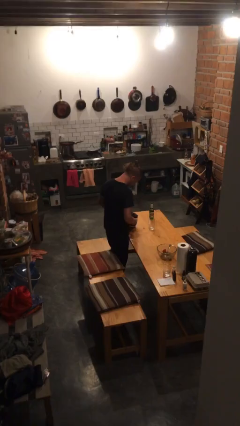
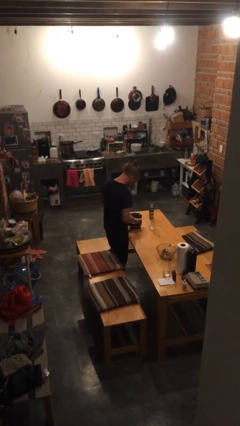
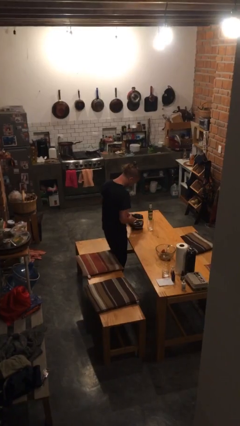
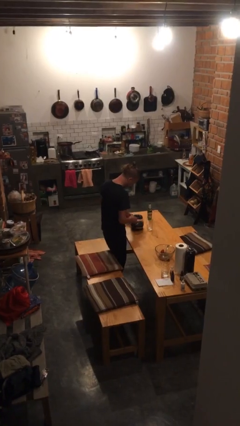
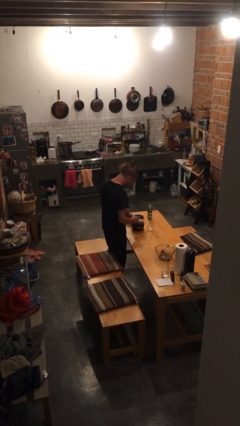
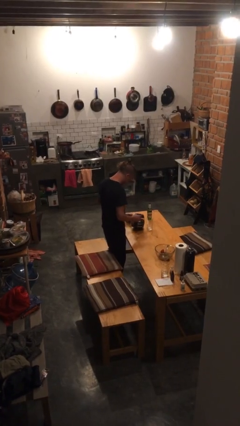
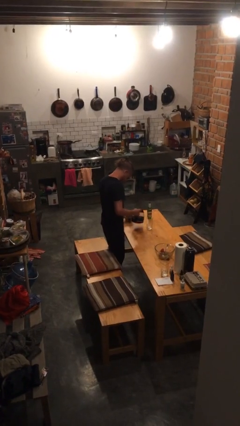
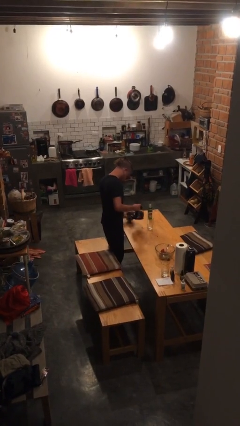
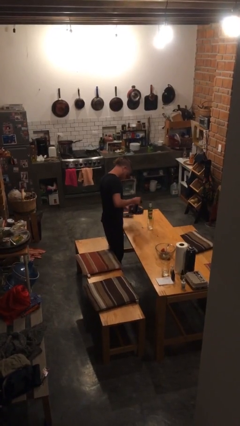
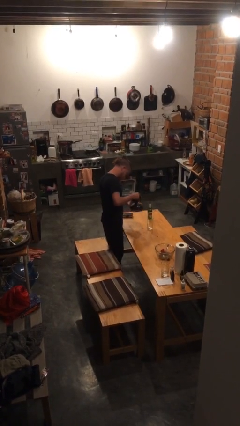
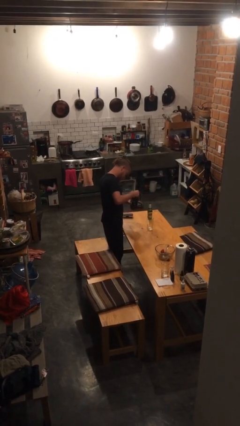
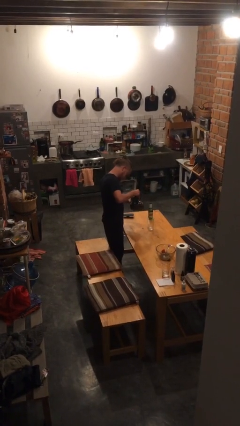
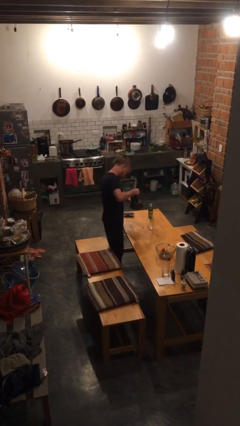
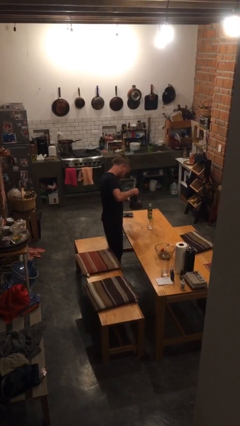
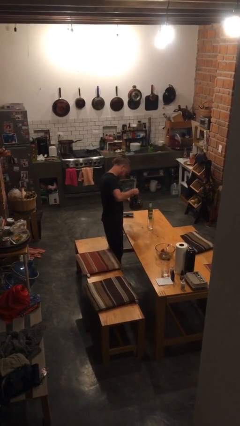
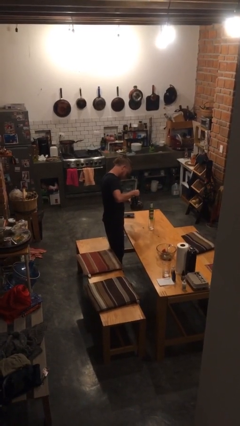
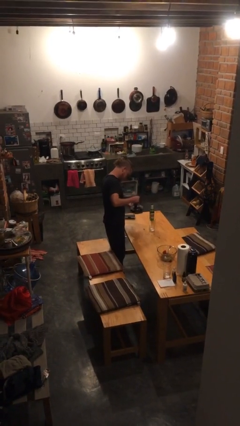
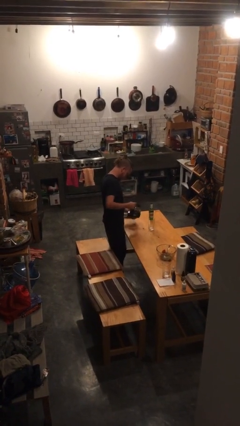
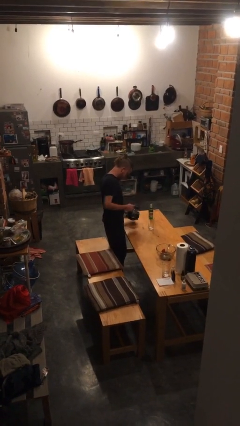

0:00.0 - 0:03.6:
person pours coffee into mug

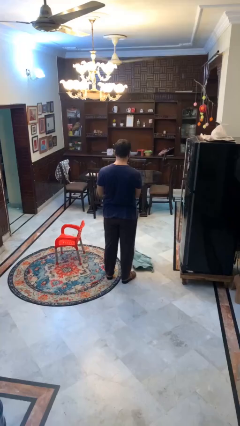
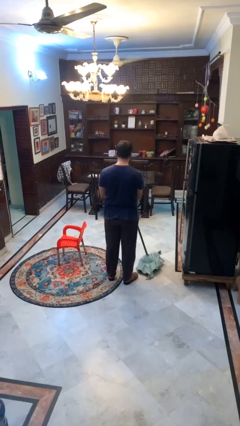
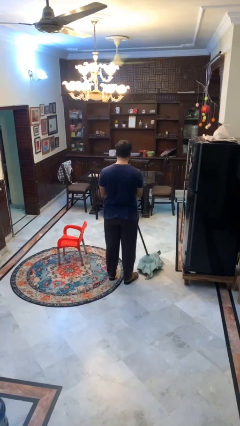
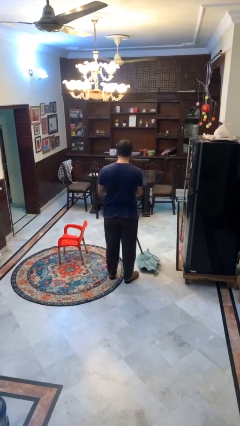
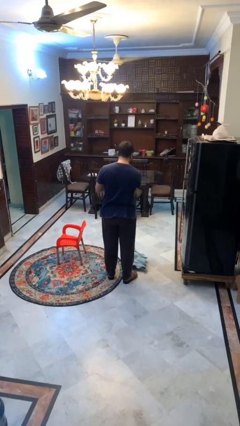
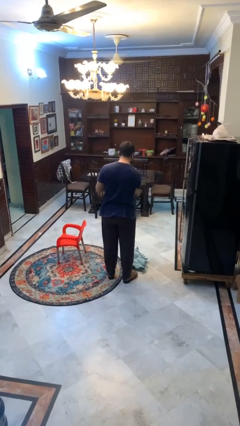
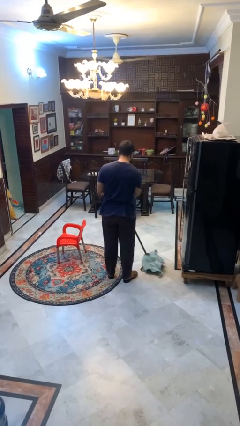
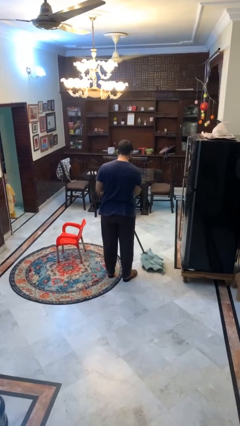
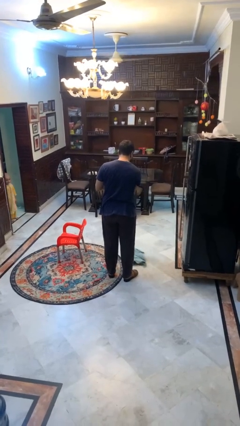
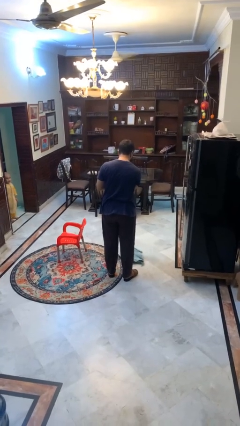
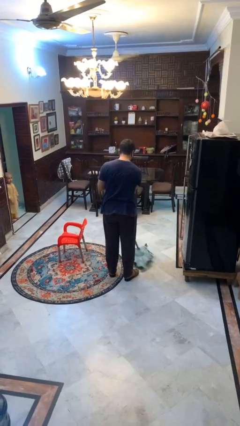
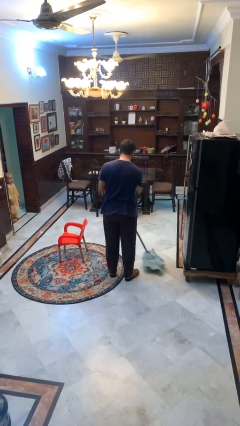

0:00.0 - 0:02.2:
person mops

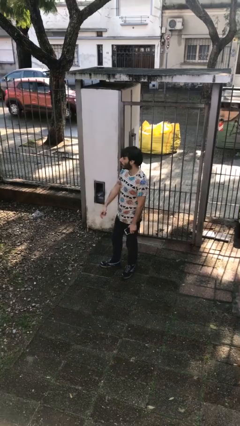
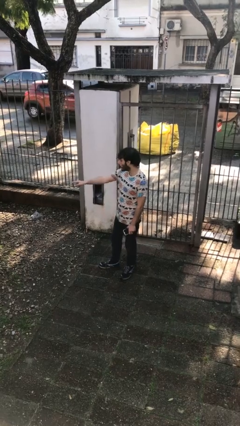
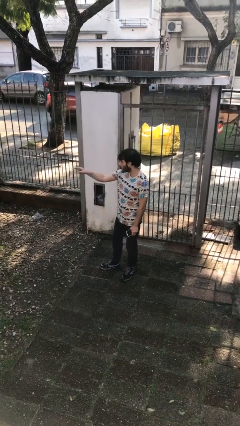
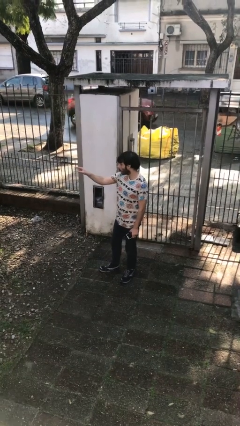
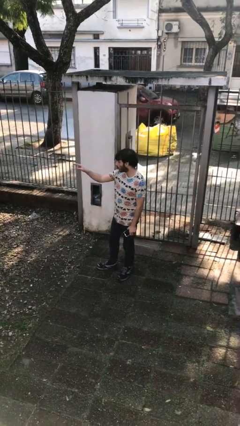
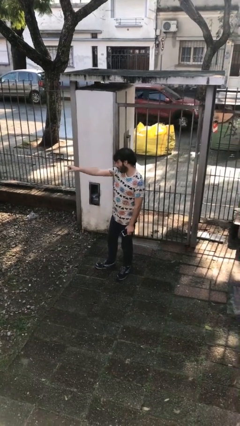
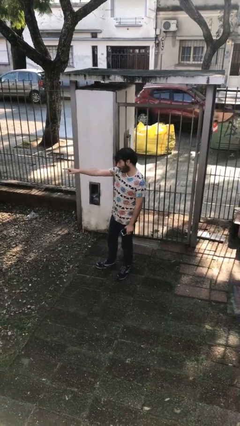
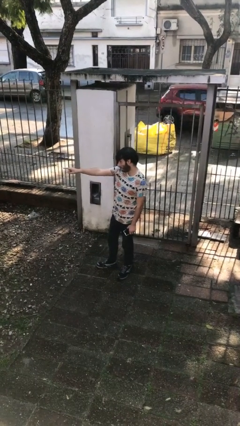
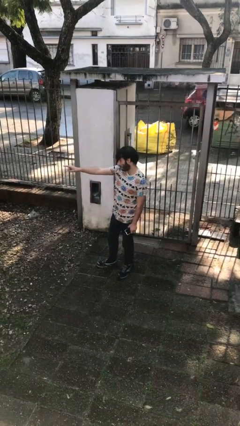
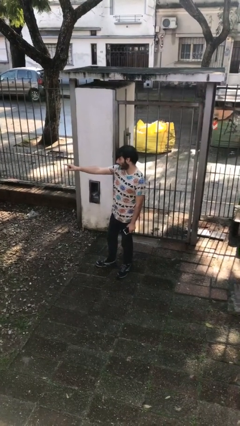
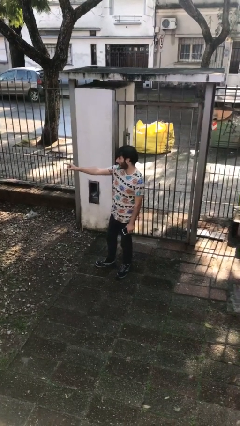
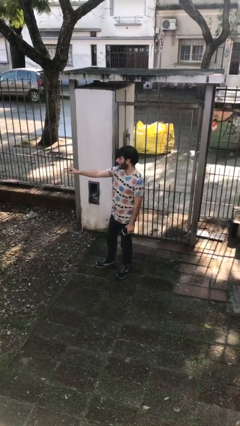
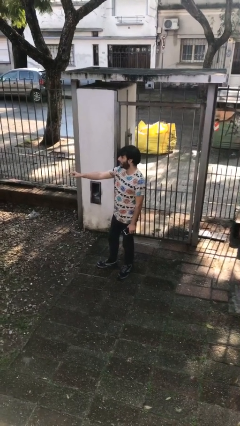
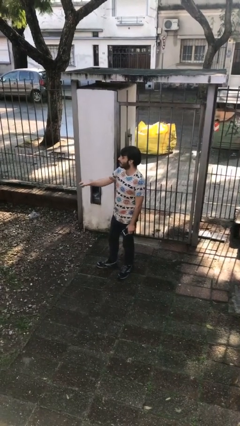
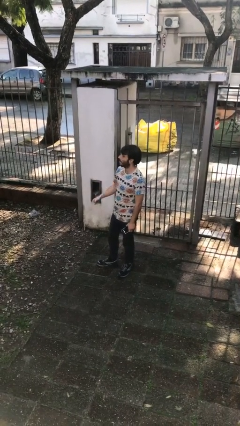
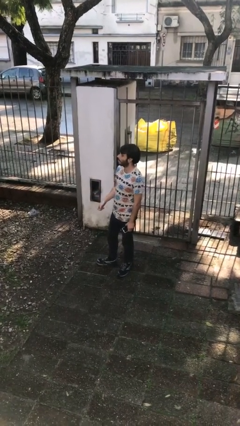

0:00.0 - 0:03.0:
person points at person

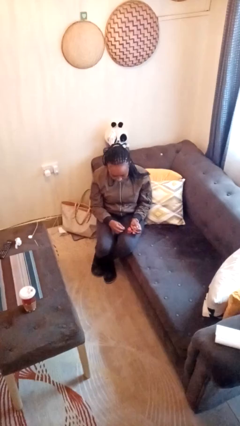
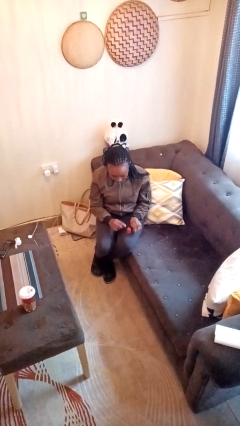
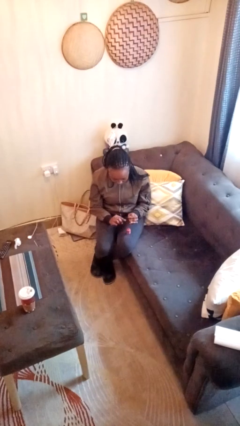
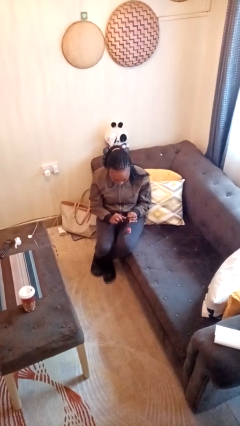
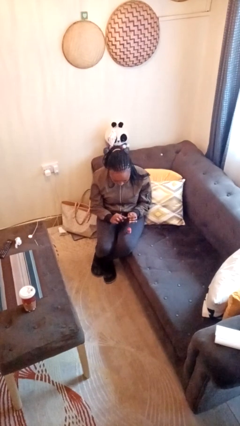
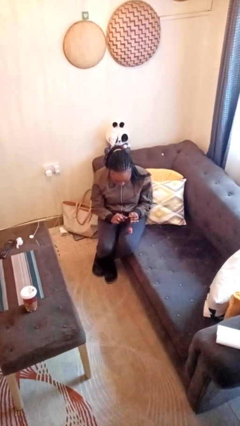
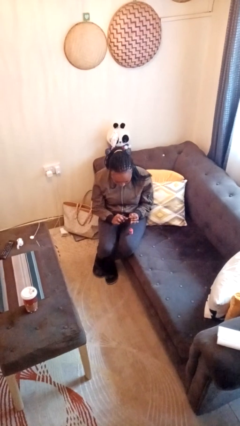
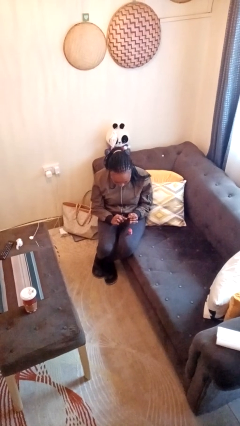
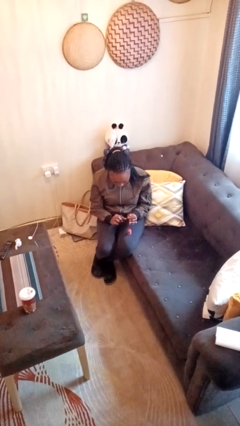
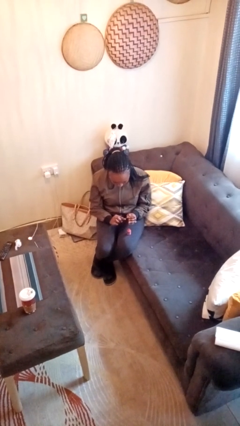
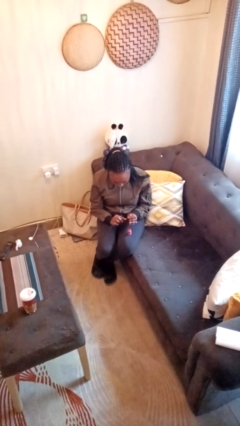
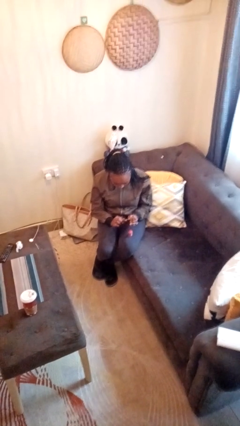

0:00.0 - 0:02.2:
person paints fingernails

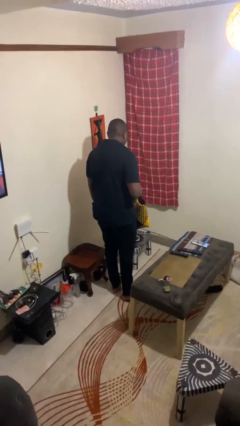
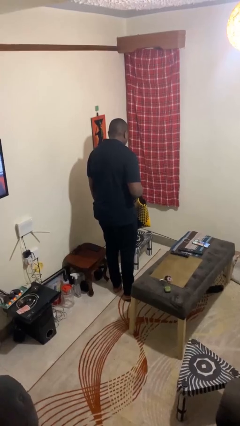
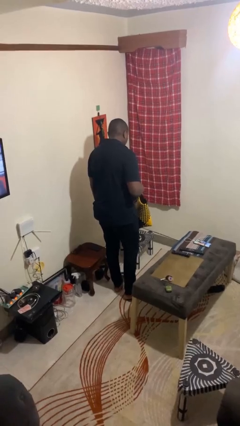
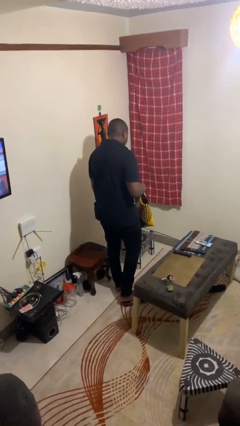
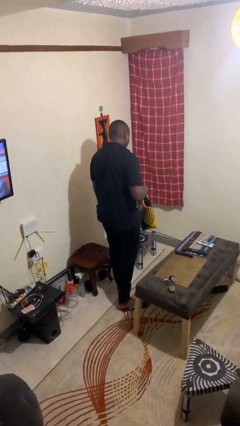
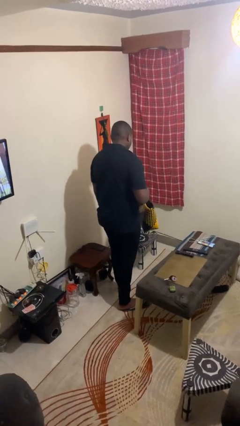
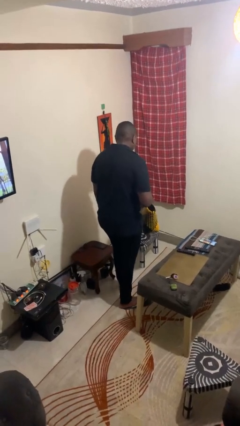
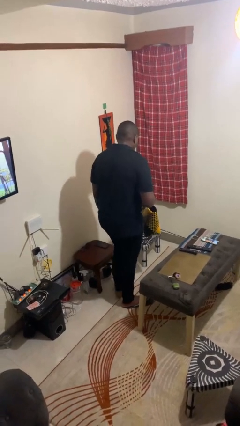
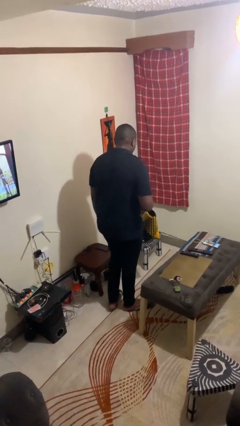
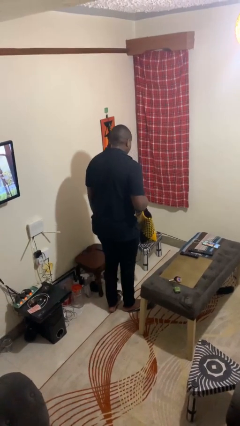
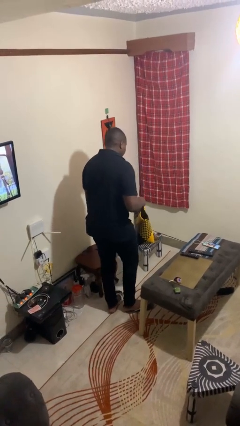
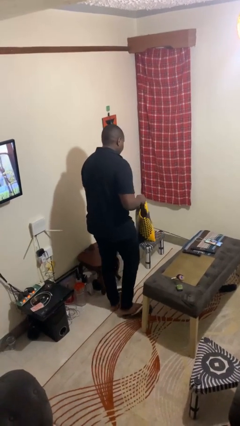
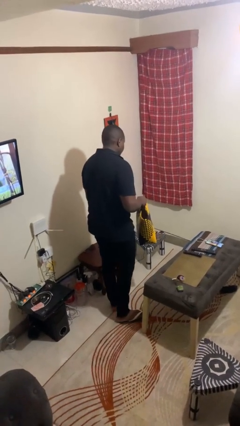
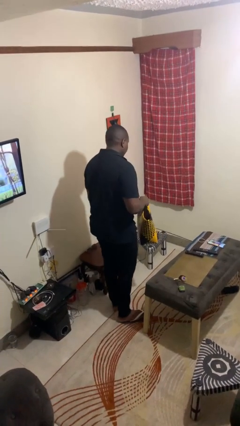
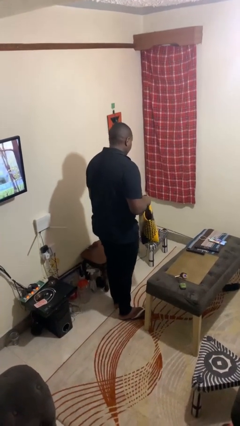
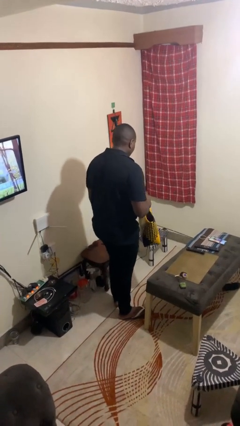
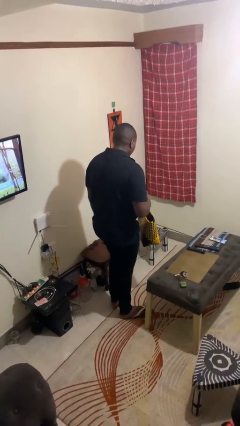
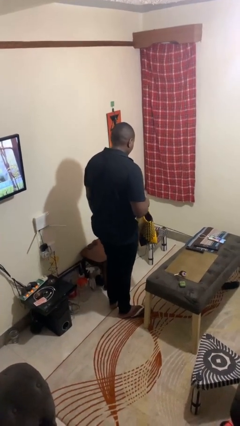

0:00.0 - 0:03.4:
person carries groceries

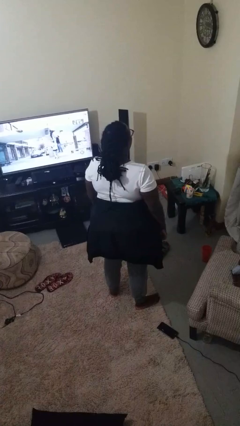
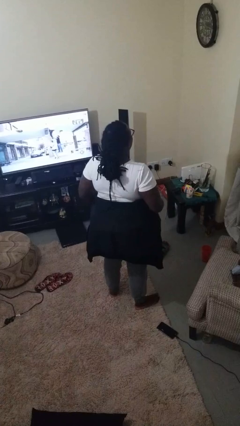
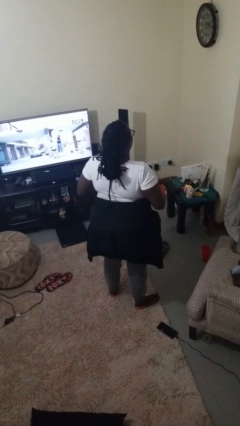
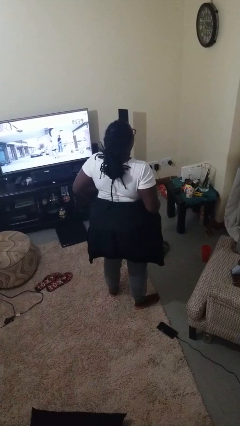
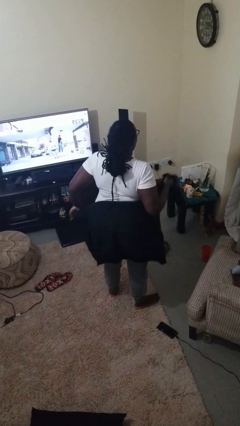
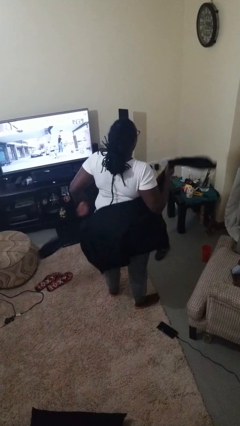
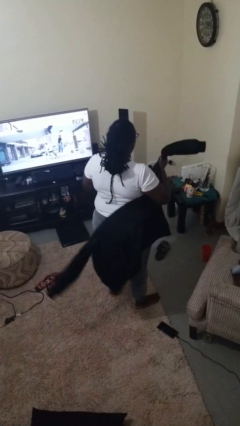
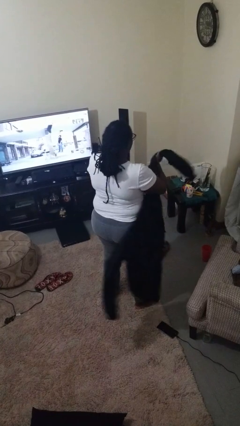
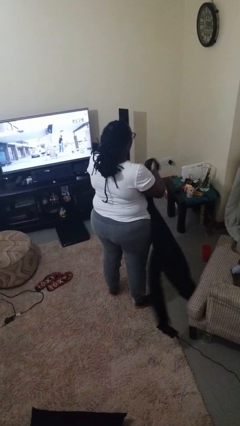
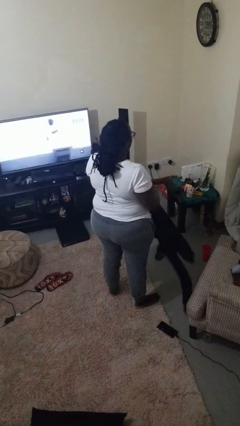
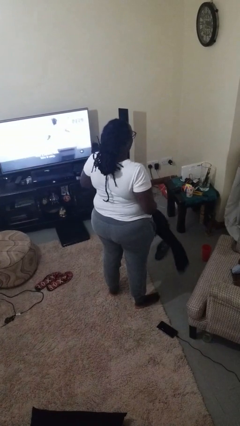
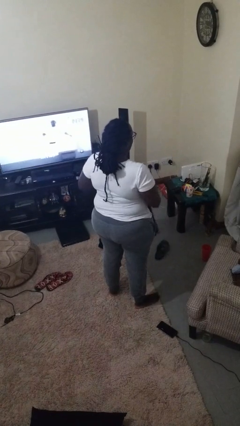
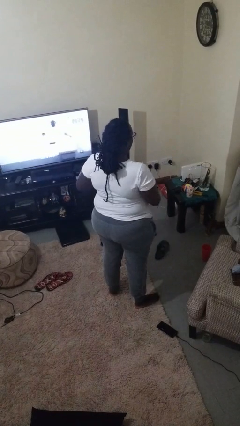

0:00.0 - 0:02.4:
person unties jacket around waist
